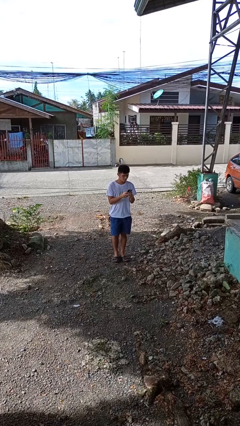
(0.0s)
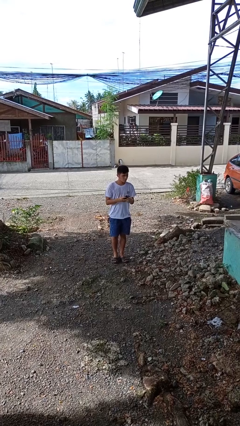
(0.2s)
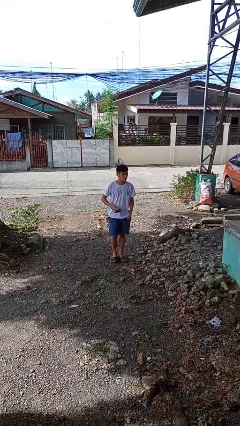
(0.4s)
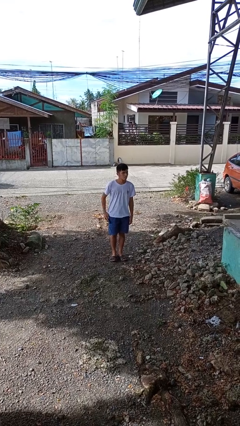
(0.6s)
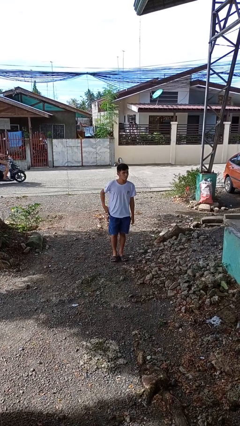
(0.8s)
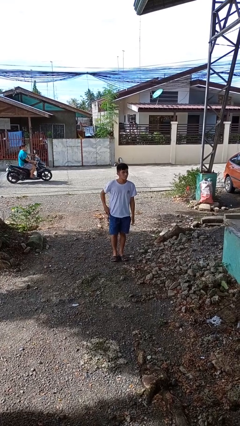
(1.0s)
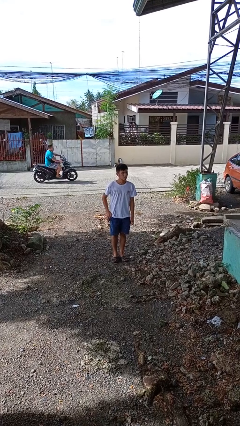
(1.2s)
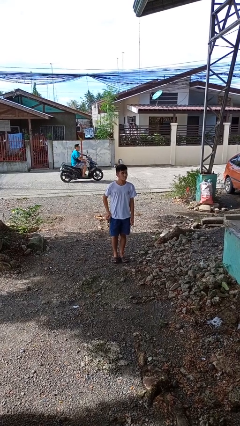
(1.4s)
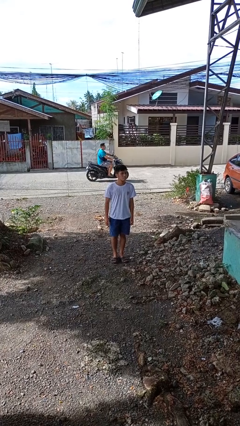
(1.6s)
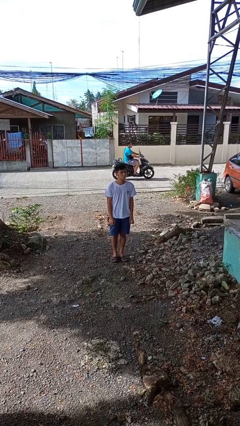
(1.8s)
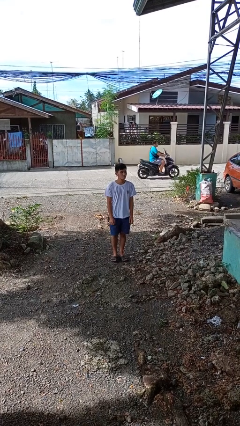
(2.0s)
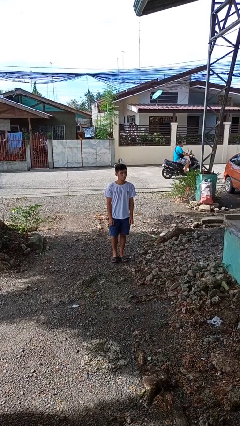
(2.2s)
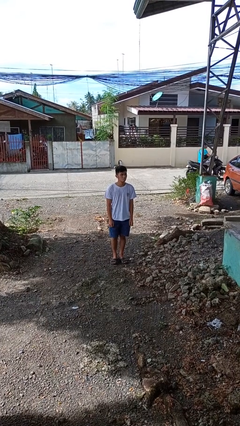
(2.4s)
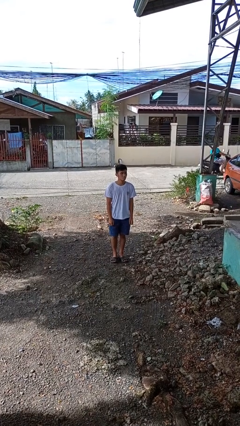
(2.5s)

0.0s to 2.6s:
person puts phone into pocket

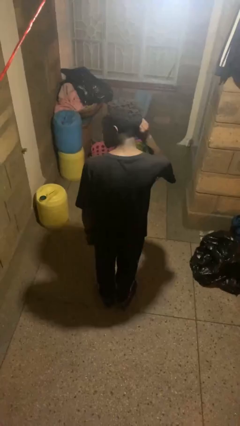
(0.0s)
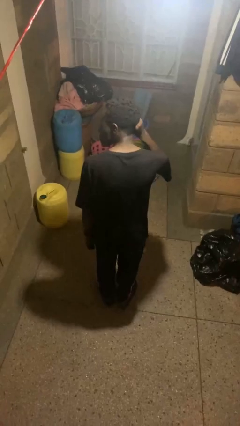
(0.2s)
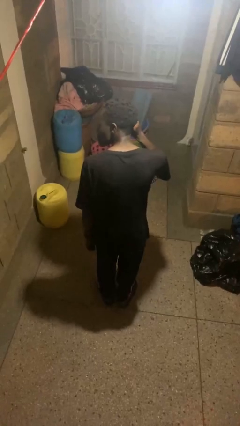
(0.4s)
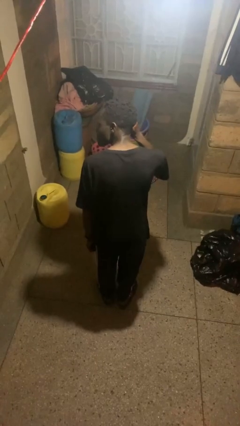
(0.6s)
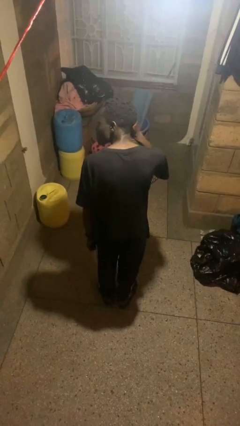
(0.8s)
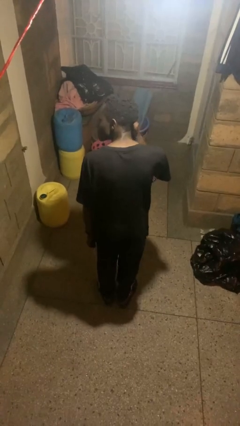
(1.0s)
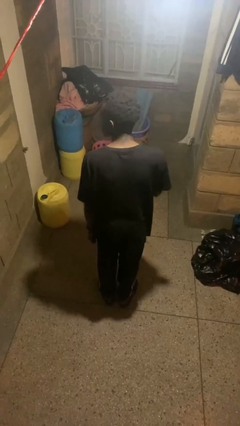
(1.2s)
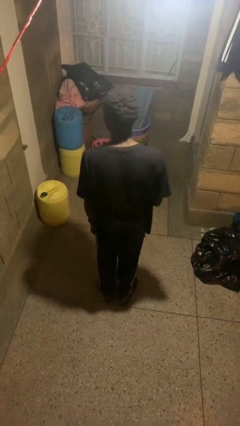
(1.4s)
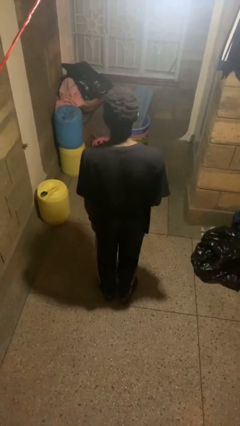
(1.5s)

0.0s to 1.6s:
person touches earlobe

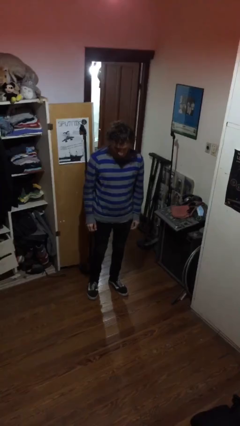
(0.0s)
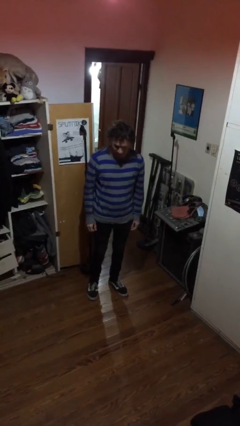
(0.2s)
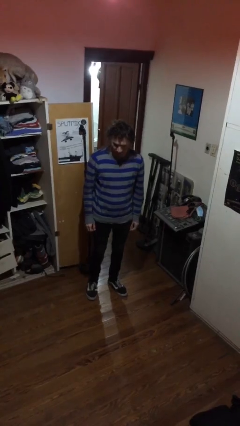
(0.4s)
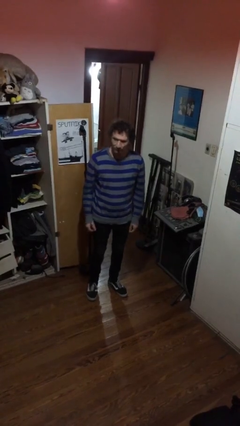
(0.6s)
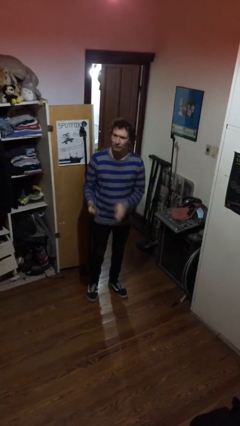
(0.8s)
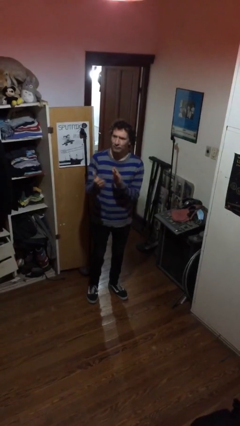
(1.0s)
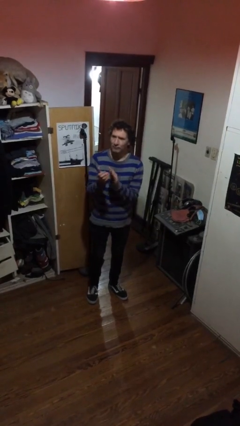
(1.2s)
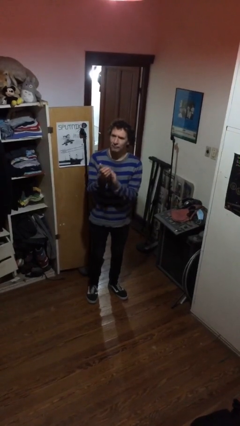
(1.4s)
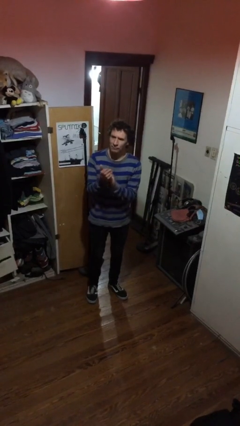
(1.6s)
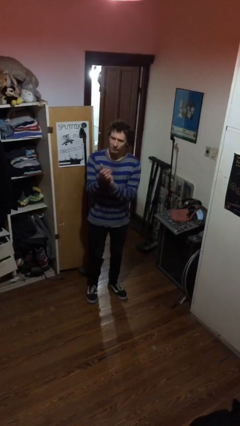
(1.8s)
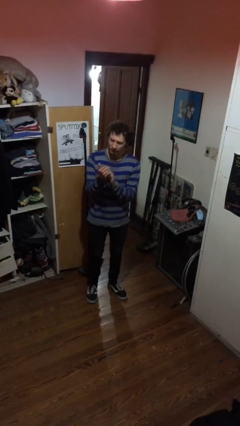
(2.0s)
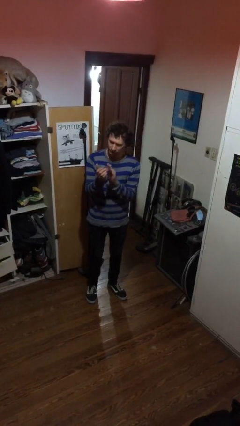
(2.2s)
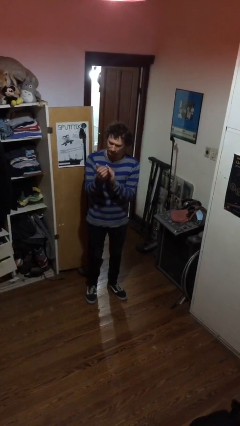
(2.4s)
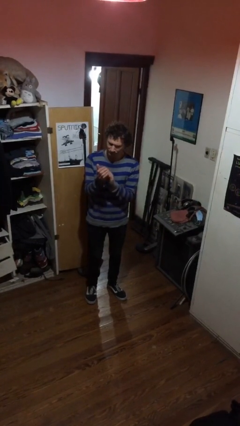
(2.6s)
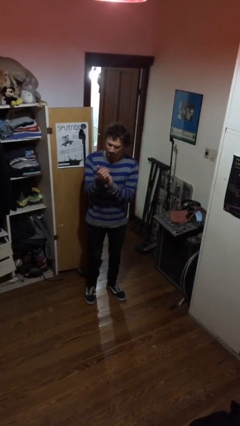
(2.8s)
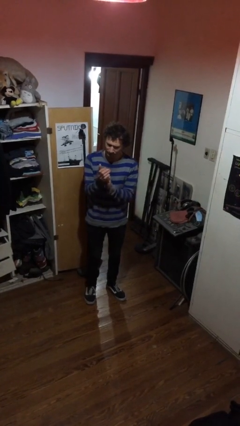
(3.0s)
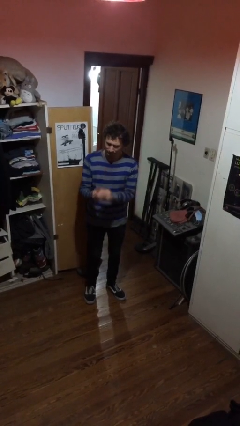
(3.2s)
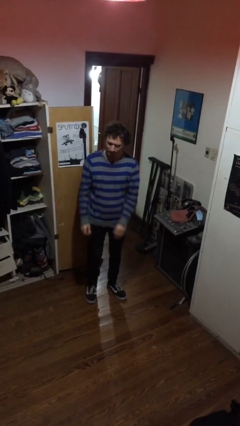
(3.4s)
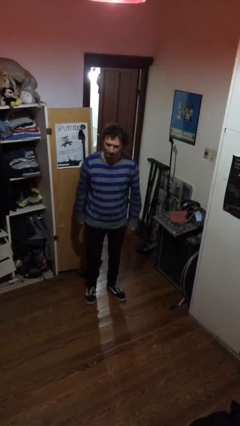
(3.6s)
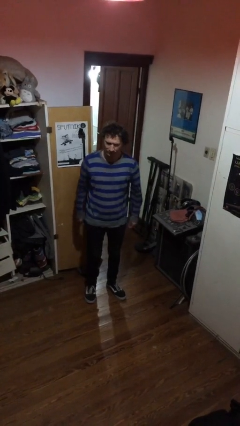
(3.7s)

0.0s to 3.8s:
person claps hands

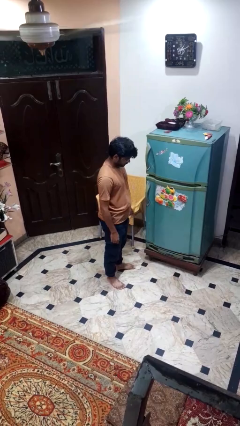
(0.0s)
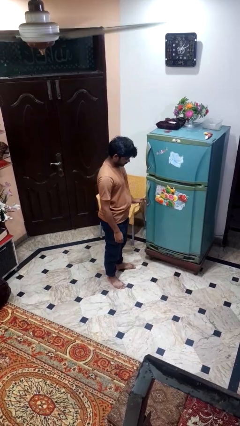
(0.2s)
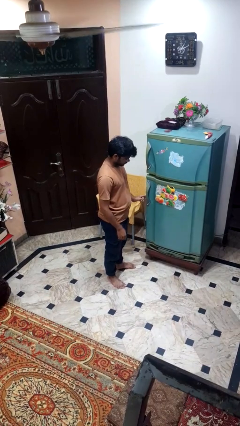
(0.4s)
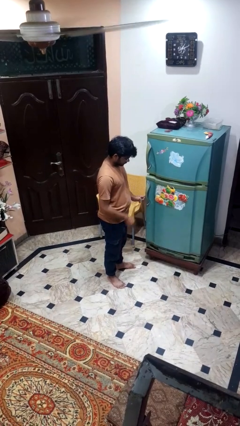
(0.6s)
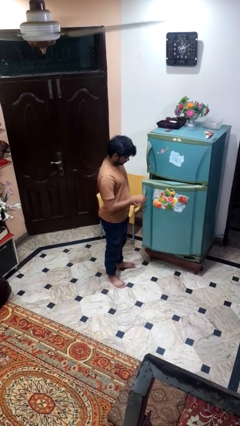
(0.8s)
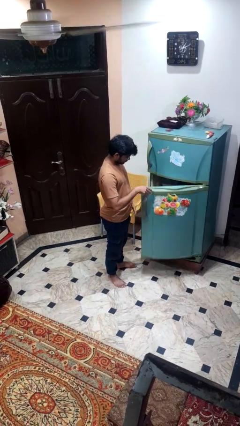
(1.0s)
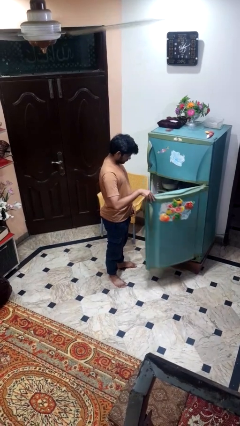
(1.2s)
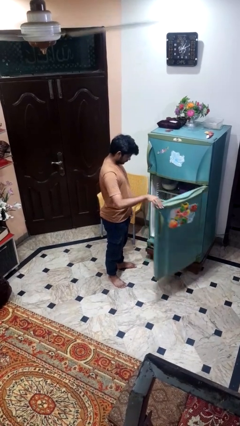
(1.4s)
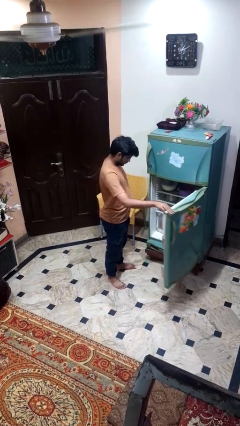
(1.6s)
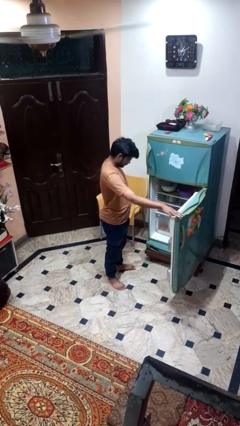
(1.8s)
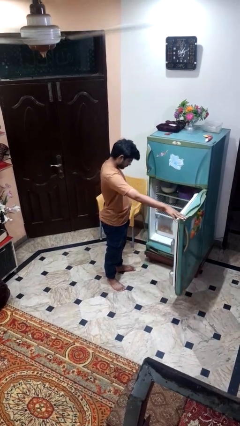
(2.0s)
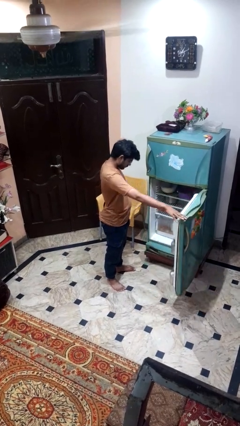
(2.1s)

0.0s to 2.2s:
person opens refrigerator

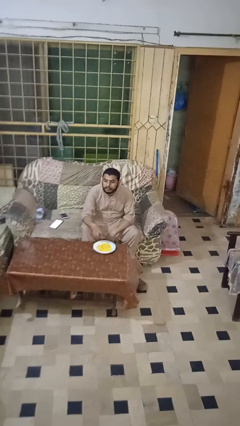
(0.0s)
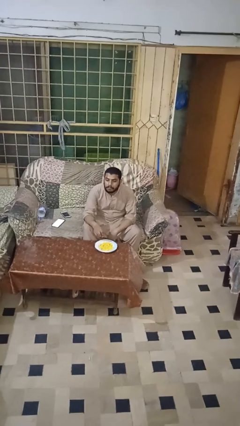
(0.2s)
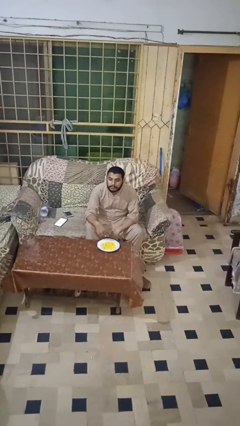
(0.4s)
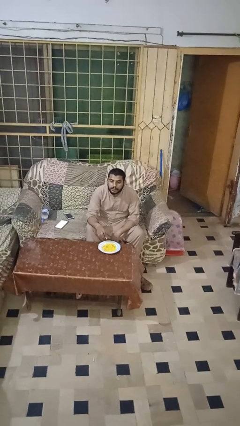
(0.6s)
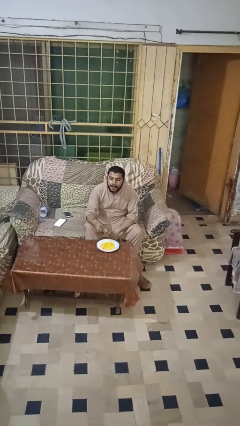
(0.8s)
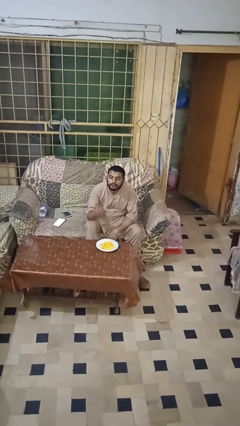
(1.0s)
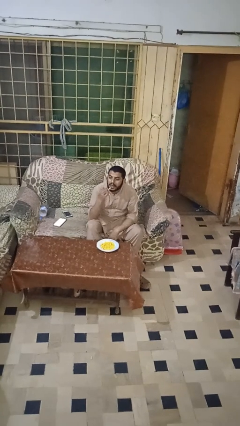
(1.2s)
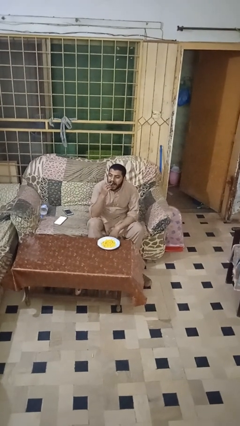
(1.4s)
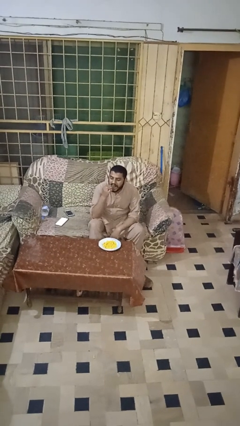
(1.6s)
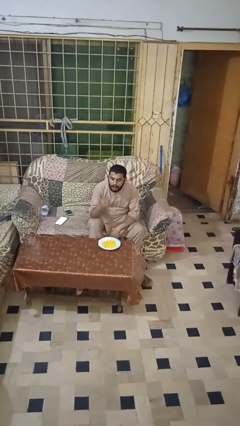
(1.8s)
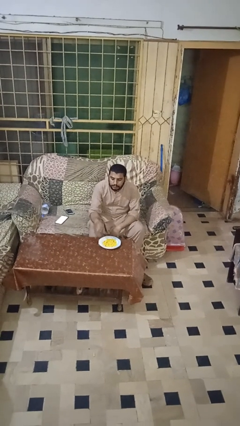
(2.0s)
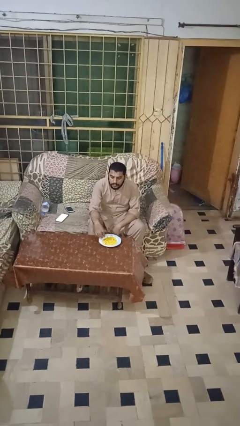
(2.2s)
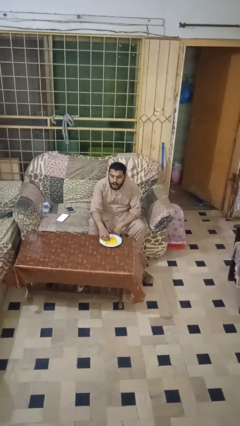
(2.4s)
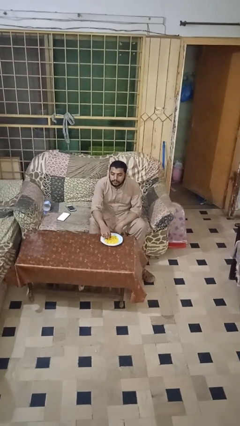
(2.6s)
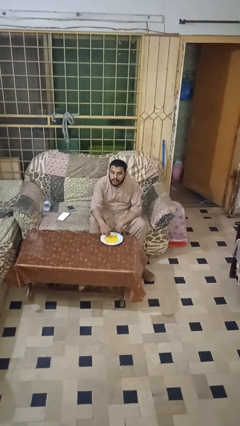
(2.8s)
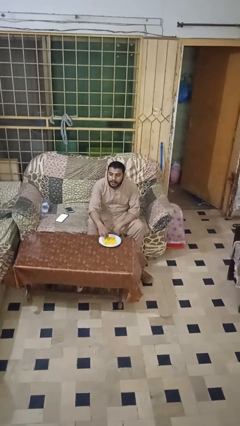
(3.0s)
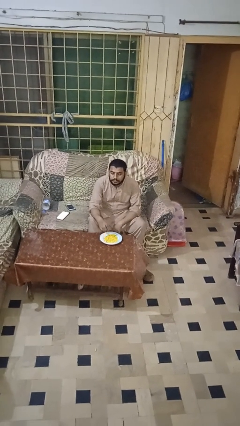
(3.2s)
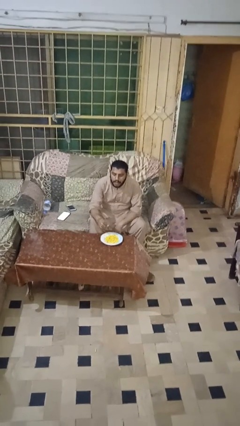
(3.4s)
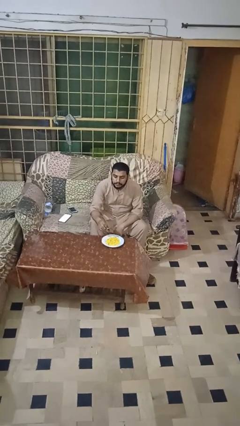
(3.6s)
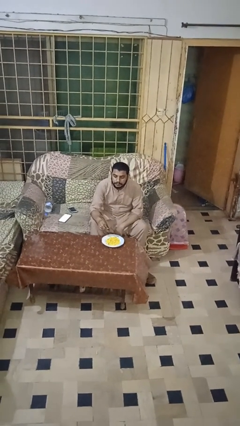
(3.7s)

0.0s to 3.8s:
person eats with hands

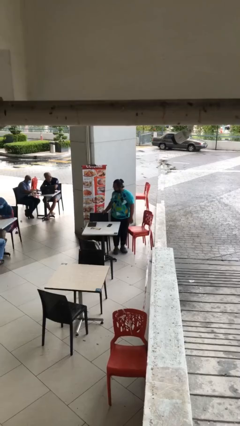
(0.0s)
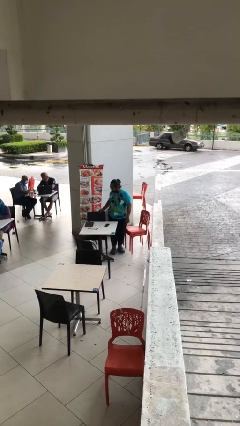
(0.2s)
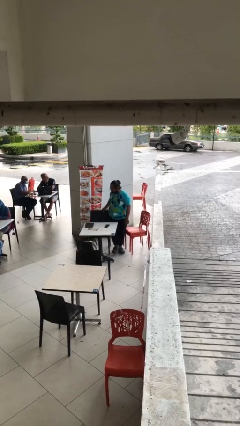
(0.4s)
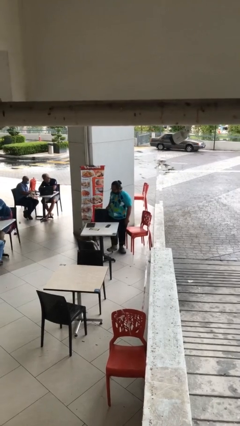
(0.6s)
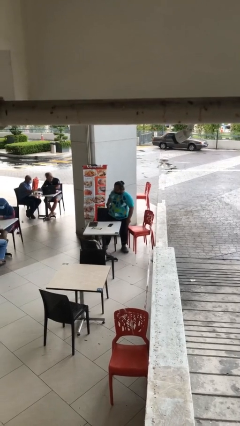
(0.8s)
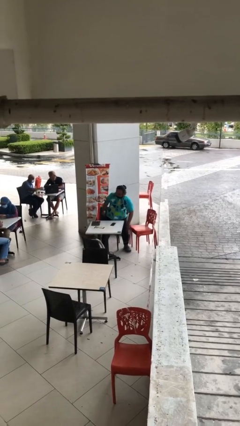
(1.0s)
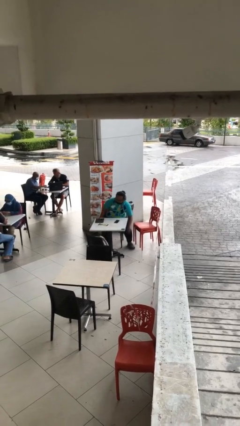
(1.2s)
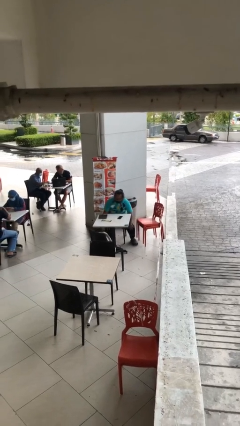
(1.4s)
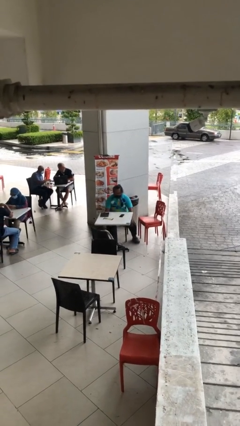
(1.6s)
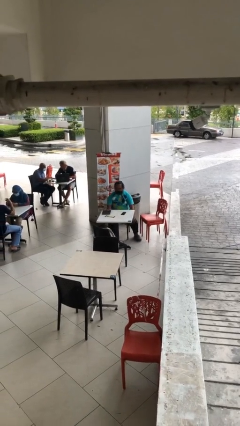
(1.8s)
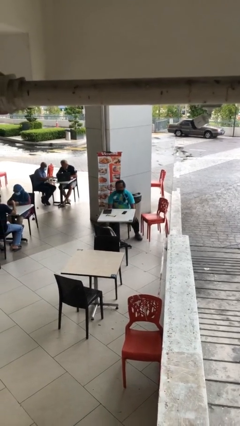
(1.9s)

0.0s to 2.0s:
person sits down

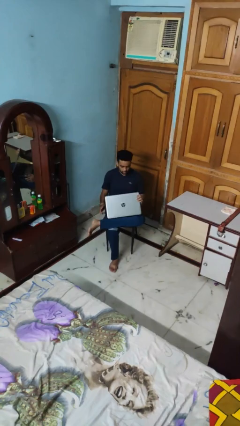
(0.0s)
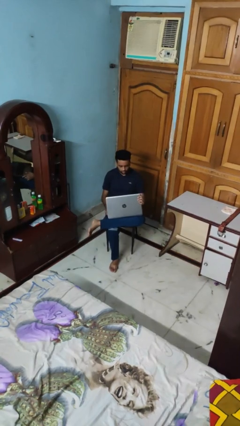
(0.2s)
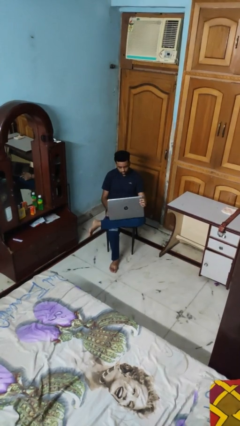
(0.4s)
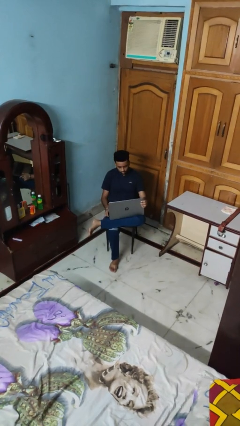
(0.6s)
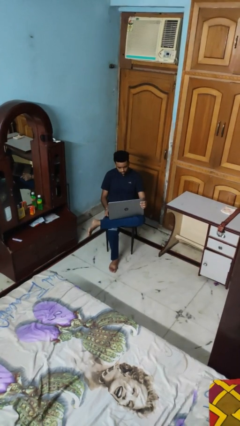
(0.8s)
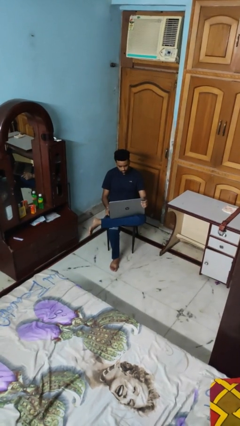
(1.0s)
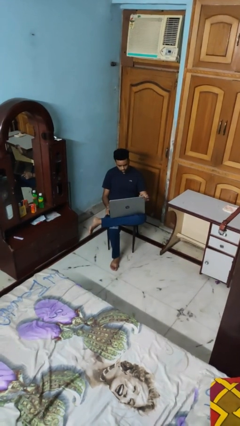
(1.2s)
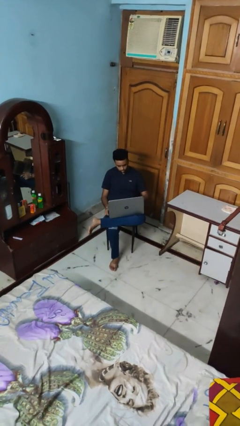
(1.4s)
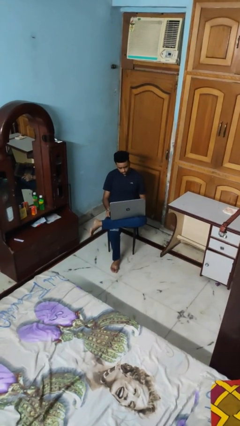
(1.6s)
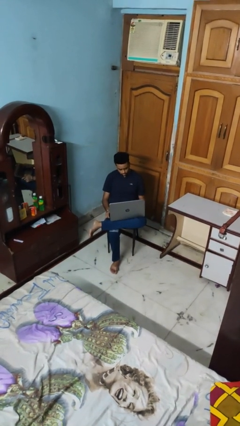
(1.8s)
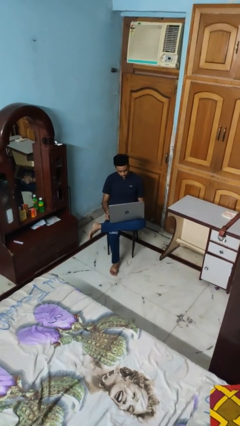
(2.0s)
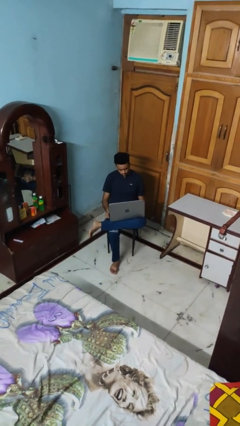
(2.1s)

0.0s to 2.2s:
person opens laptop
